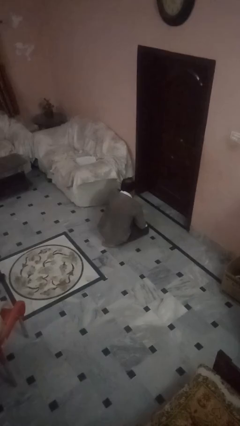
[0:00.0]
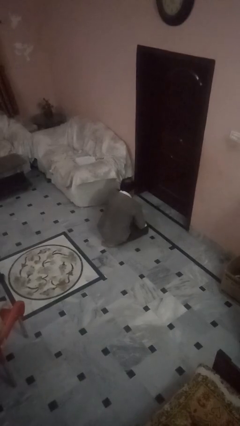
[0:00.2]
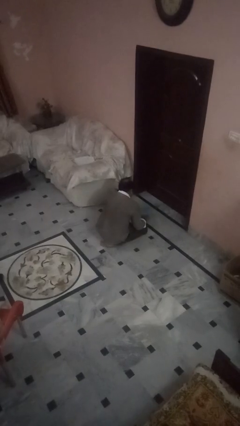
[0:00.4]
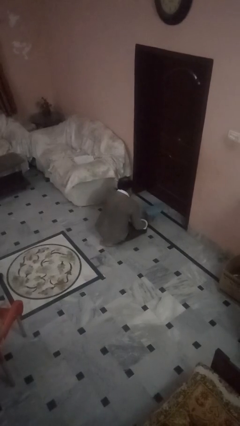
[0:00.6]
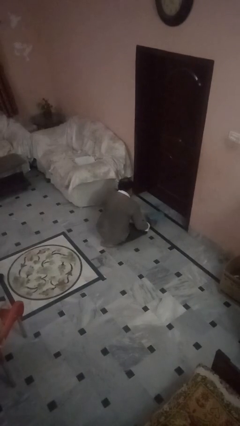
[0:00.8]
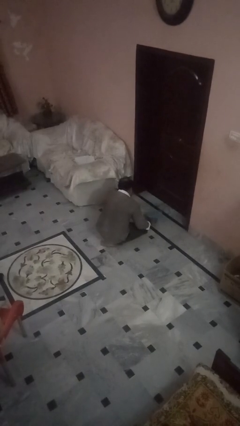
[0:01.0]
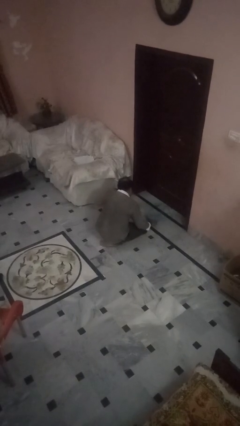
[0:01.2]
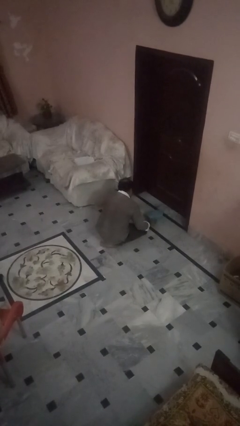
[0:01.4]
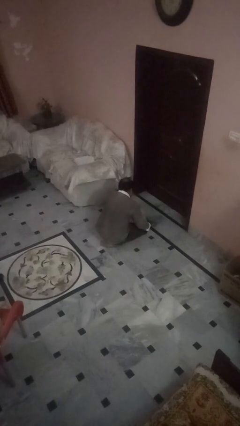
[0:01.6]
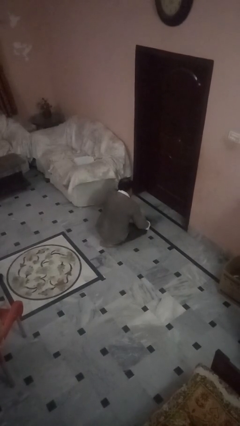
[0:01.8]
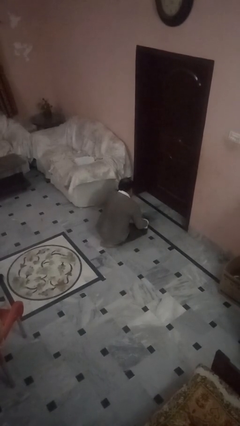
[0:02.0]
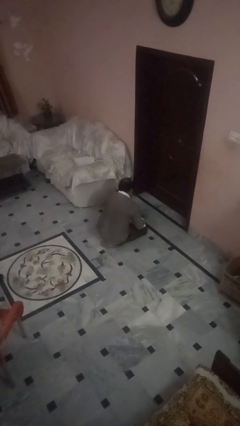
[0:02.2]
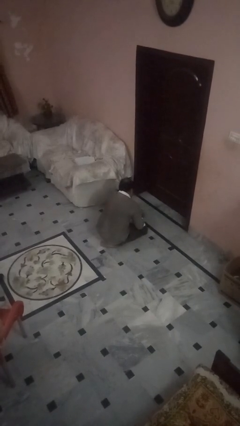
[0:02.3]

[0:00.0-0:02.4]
person swats bug

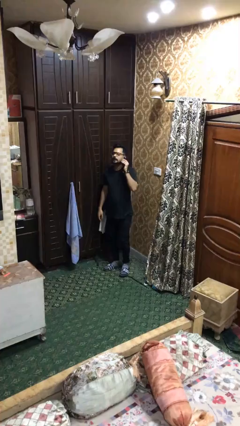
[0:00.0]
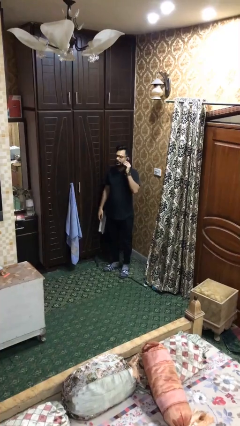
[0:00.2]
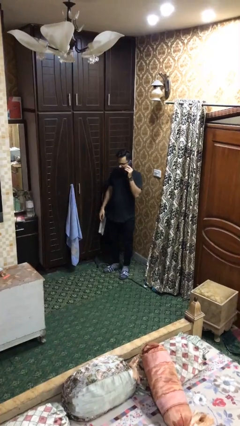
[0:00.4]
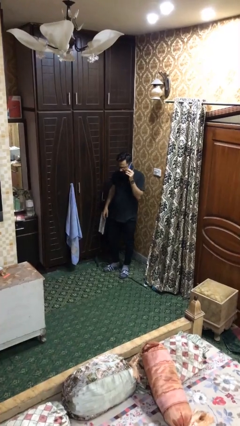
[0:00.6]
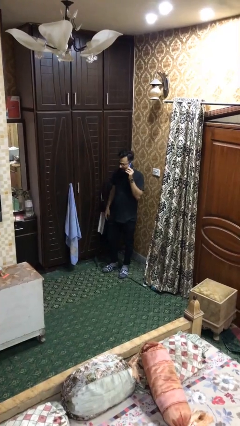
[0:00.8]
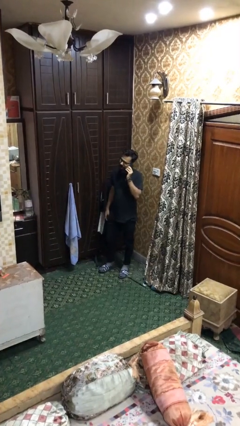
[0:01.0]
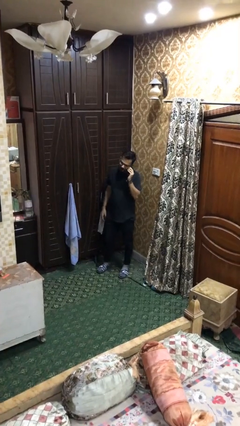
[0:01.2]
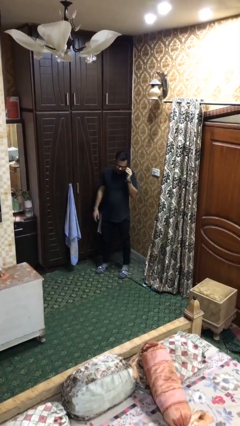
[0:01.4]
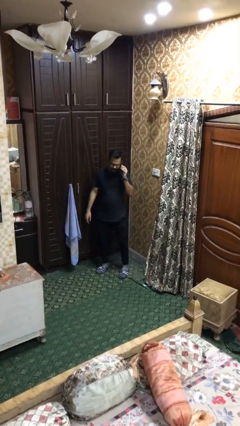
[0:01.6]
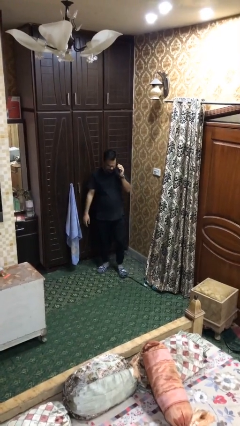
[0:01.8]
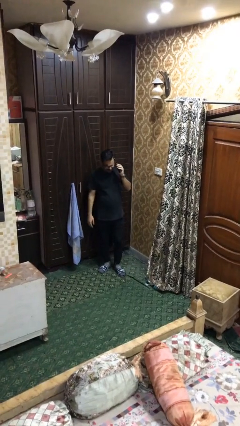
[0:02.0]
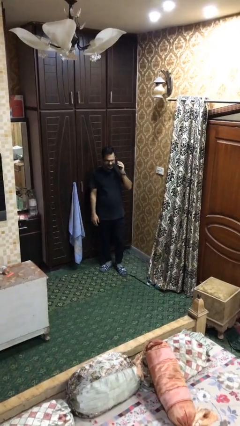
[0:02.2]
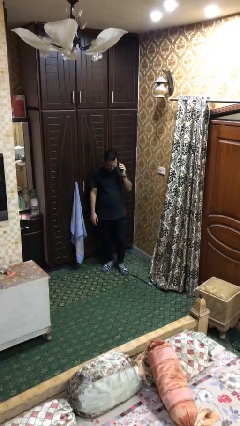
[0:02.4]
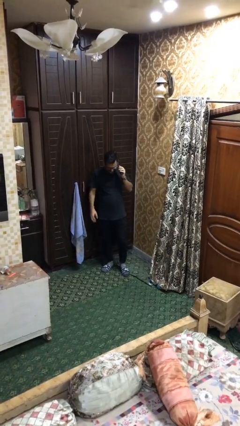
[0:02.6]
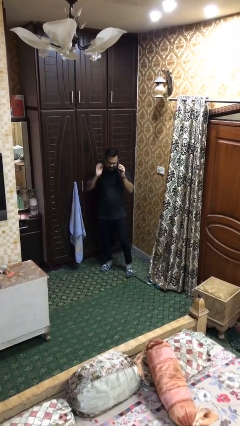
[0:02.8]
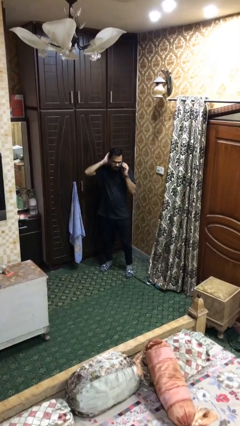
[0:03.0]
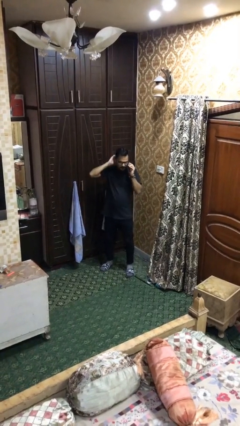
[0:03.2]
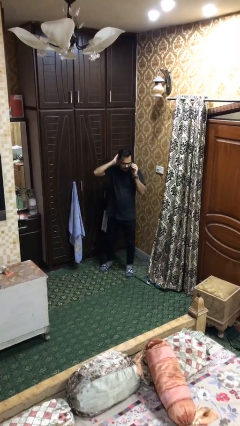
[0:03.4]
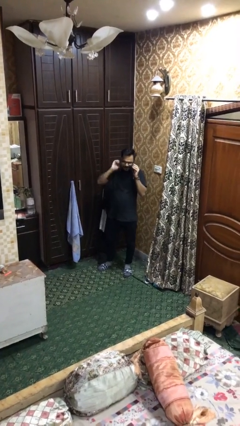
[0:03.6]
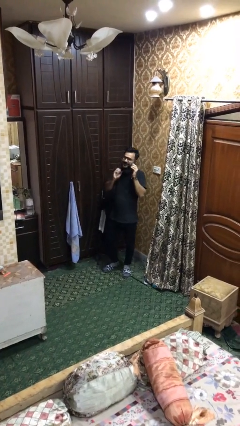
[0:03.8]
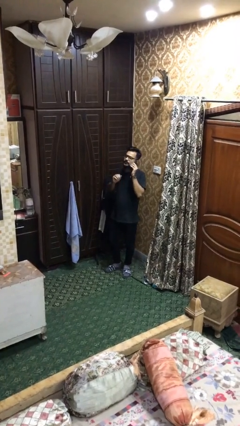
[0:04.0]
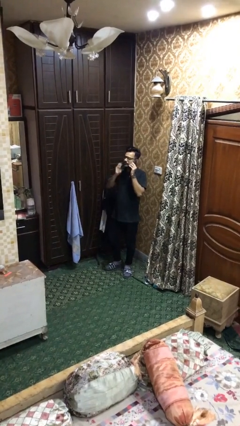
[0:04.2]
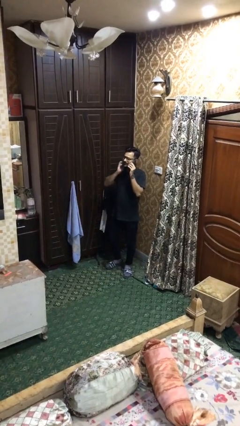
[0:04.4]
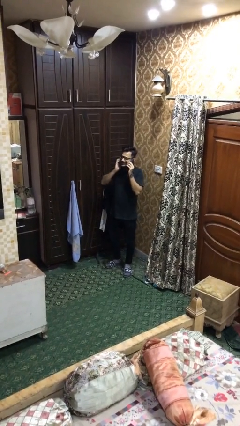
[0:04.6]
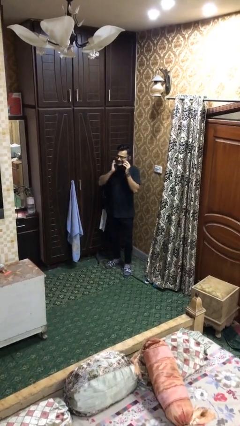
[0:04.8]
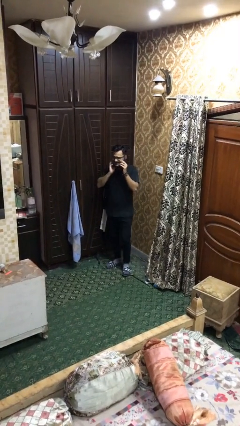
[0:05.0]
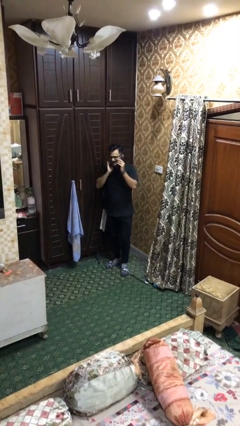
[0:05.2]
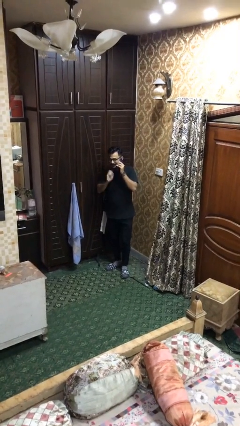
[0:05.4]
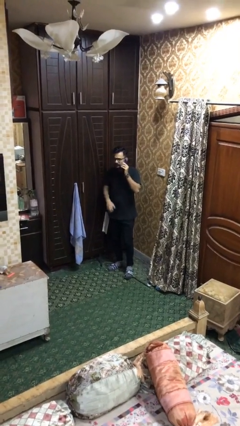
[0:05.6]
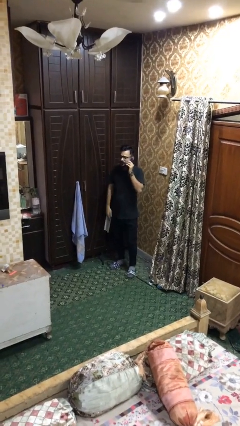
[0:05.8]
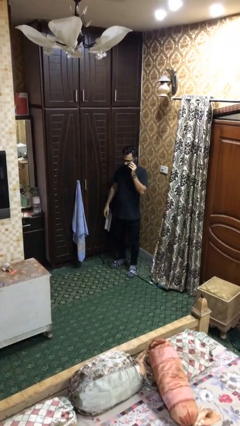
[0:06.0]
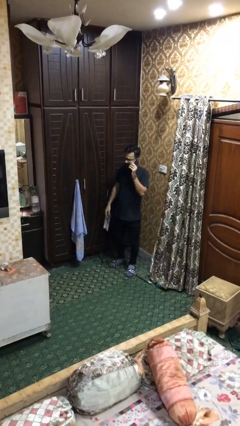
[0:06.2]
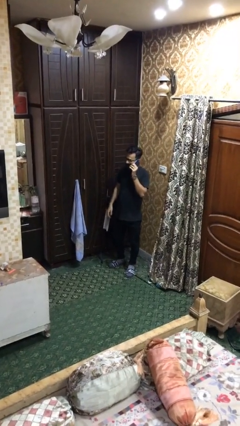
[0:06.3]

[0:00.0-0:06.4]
person talks on phone

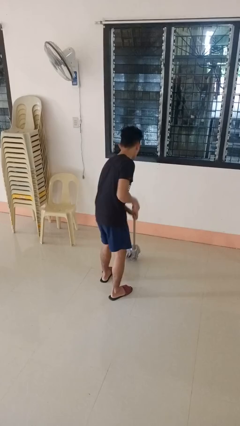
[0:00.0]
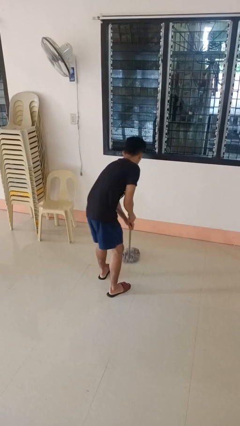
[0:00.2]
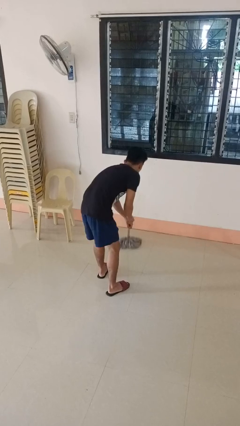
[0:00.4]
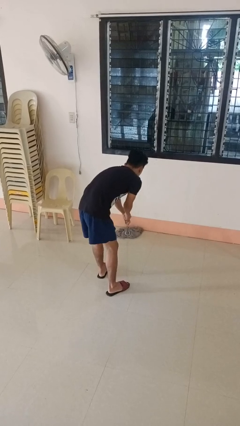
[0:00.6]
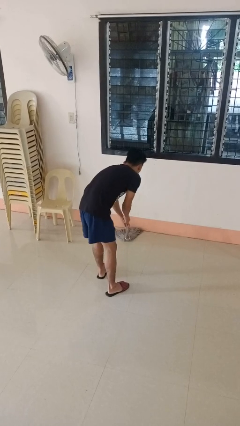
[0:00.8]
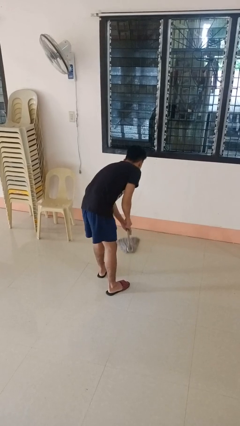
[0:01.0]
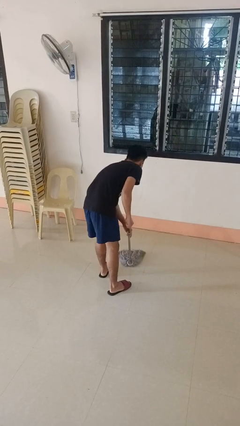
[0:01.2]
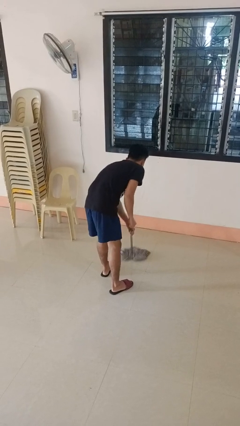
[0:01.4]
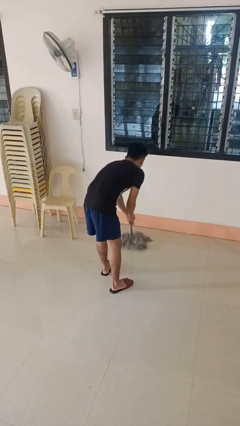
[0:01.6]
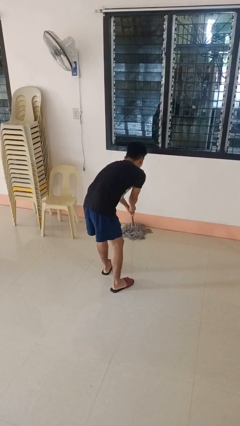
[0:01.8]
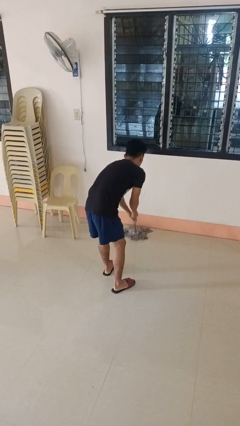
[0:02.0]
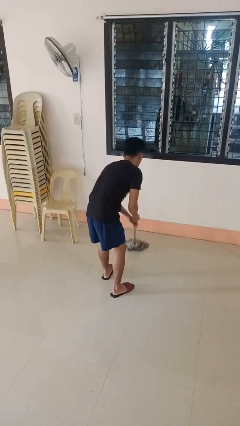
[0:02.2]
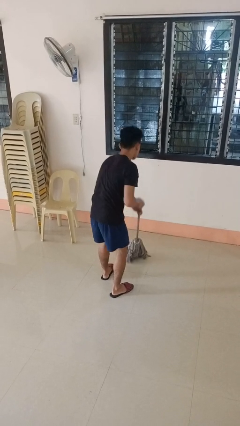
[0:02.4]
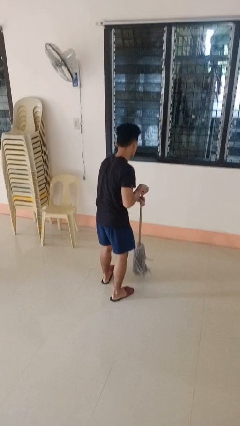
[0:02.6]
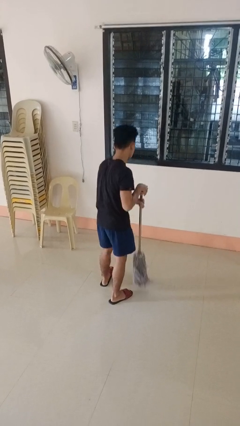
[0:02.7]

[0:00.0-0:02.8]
person mops

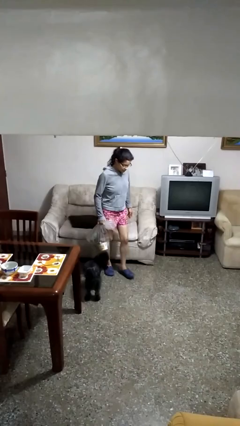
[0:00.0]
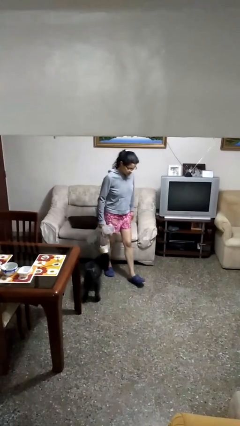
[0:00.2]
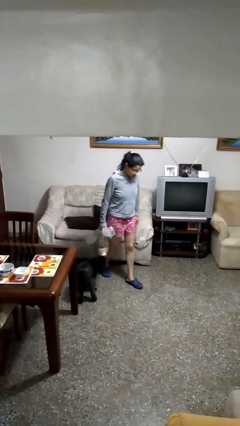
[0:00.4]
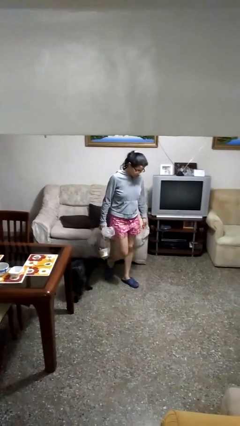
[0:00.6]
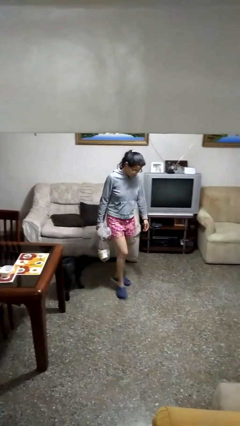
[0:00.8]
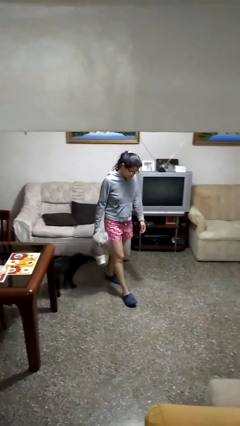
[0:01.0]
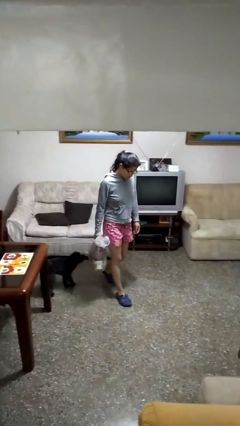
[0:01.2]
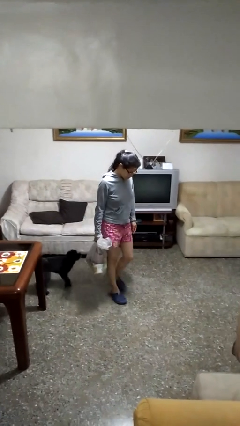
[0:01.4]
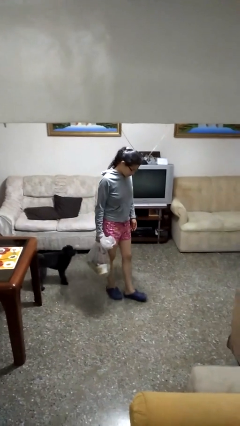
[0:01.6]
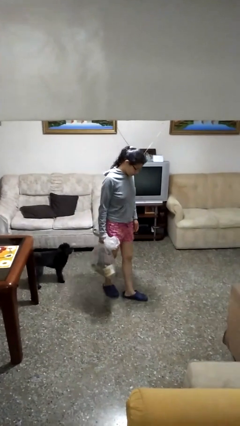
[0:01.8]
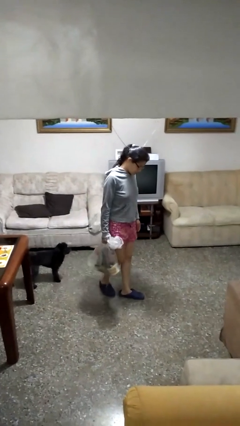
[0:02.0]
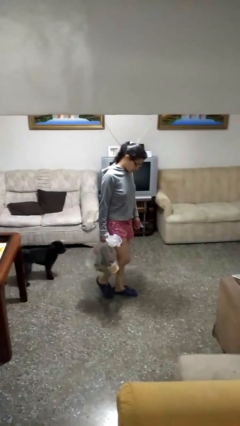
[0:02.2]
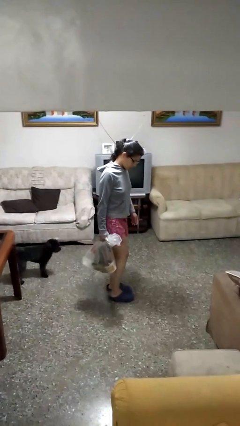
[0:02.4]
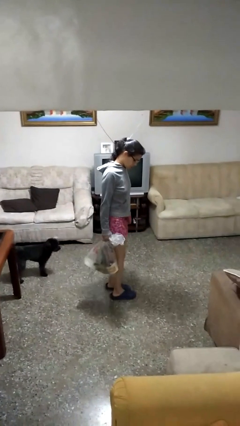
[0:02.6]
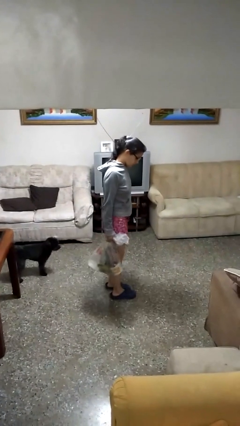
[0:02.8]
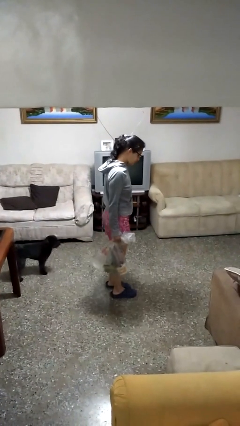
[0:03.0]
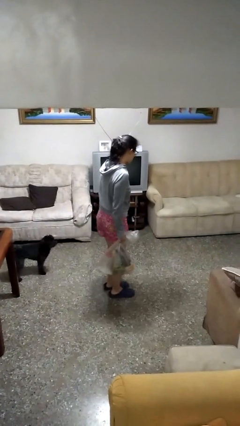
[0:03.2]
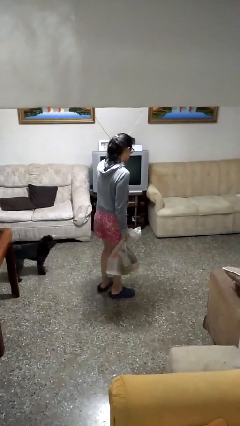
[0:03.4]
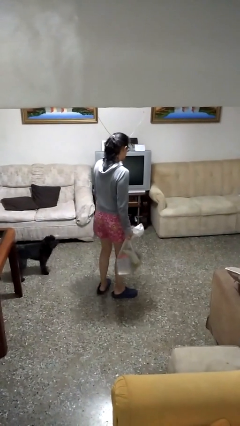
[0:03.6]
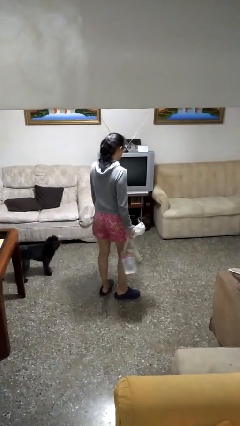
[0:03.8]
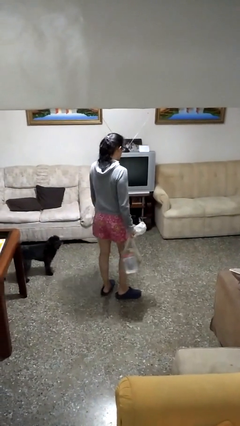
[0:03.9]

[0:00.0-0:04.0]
person carries groceries

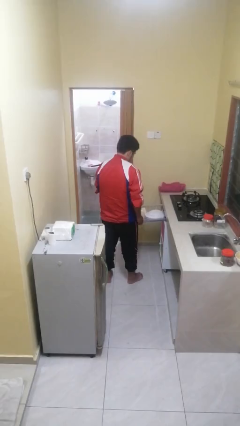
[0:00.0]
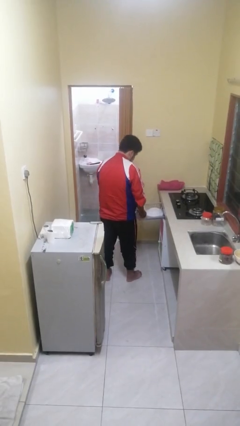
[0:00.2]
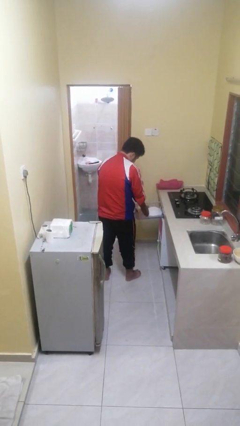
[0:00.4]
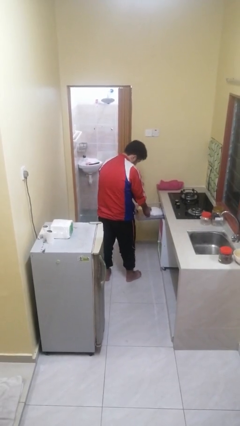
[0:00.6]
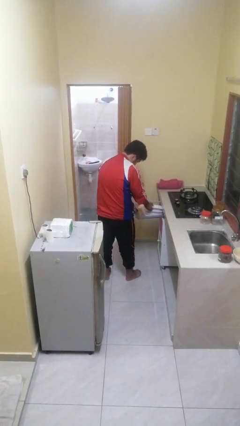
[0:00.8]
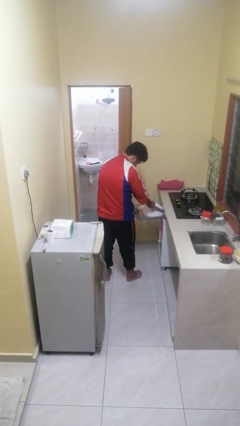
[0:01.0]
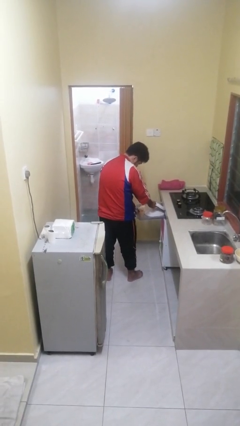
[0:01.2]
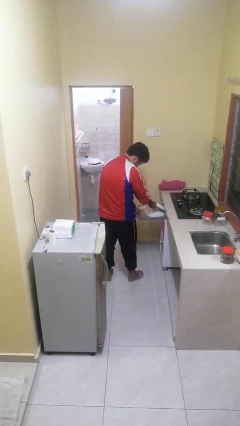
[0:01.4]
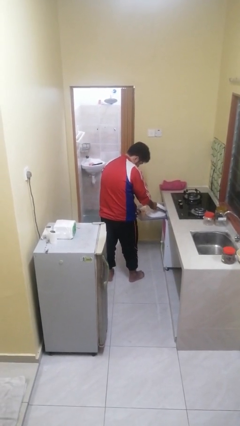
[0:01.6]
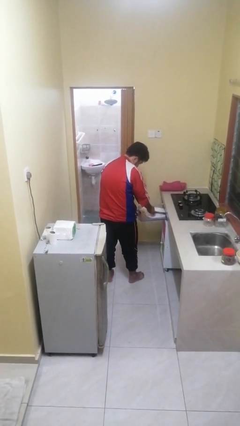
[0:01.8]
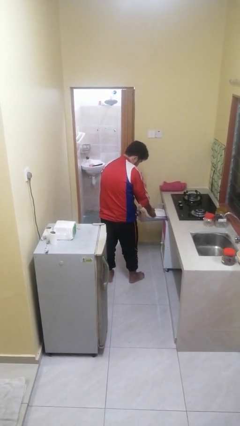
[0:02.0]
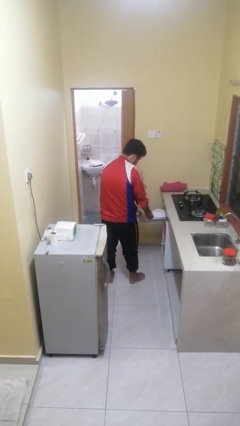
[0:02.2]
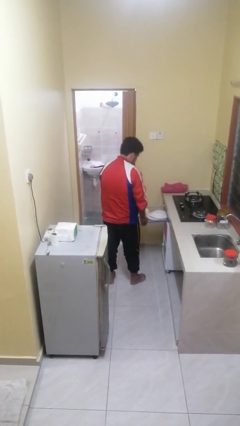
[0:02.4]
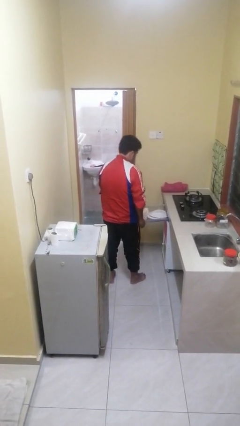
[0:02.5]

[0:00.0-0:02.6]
person searches in kitchen drawer
